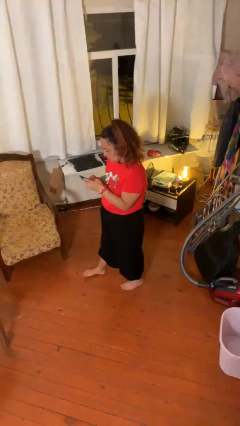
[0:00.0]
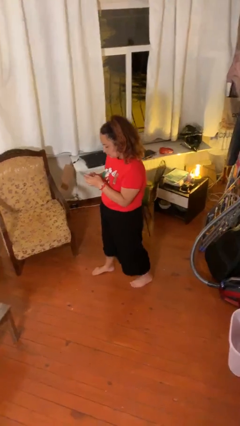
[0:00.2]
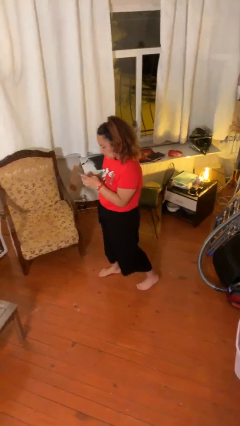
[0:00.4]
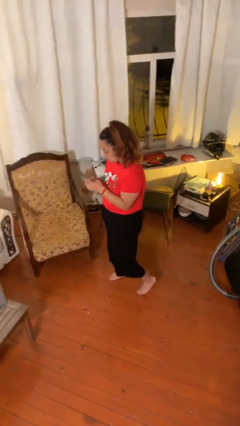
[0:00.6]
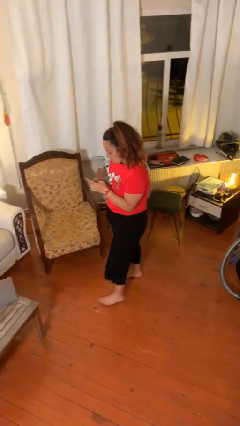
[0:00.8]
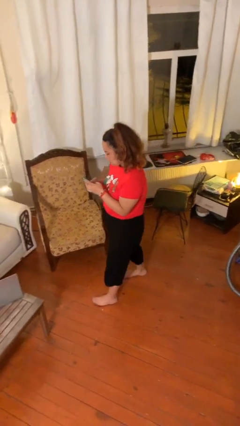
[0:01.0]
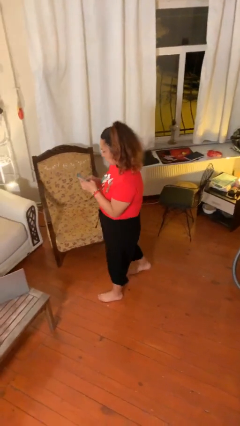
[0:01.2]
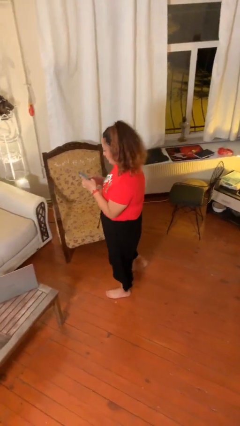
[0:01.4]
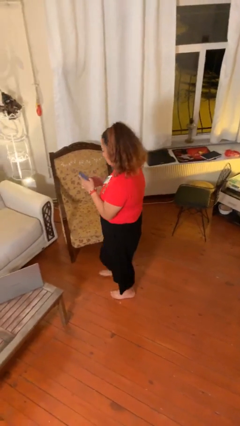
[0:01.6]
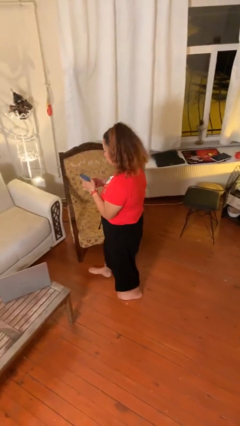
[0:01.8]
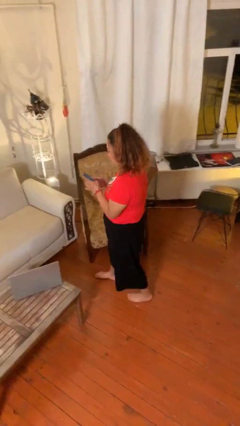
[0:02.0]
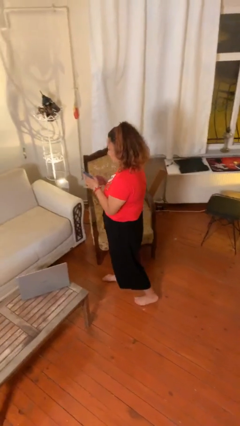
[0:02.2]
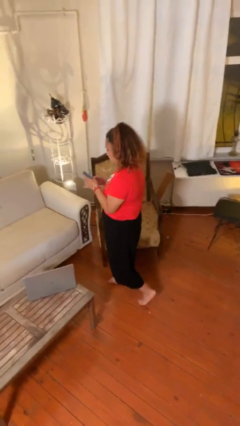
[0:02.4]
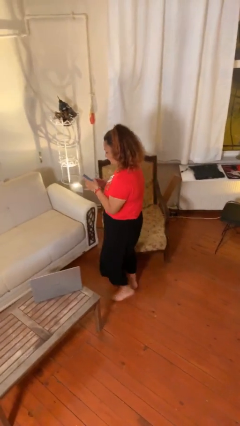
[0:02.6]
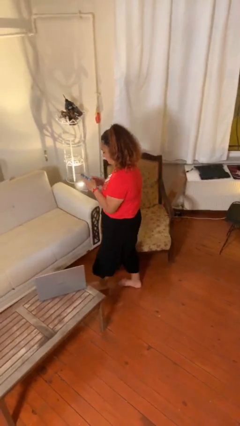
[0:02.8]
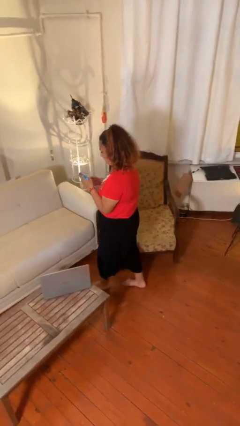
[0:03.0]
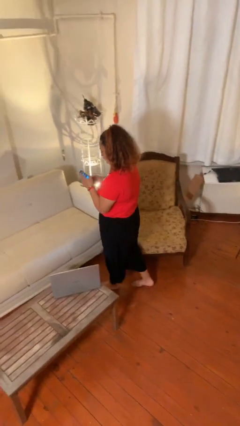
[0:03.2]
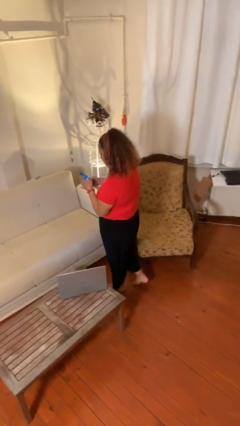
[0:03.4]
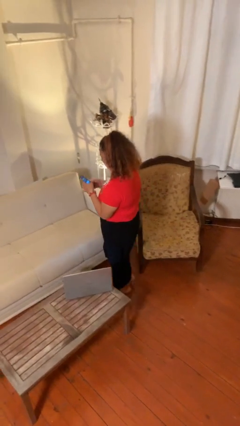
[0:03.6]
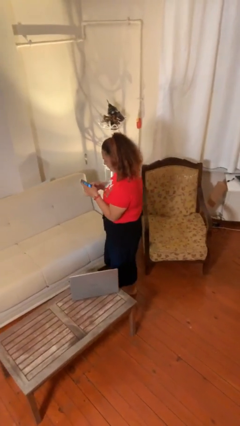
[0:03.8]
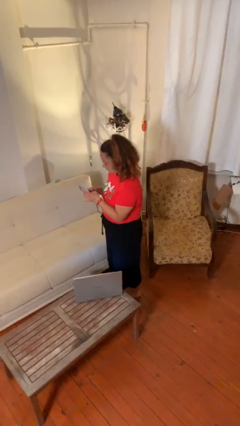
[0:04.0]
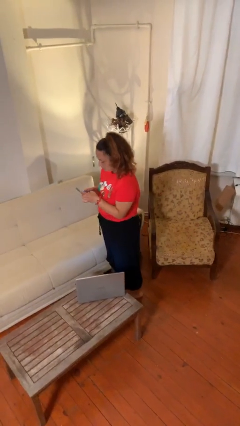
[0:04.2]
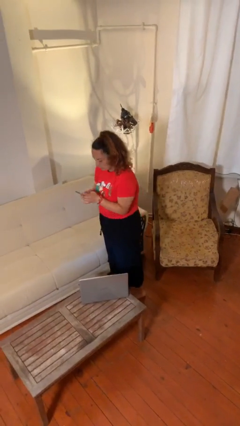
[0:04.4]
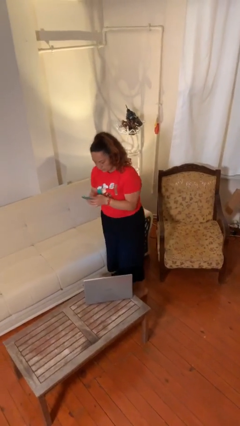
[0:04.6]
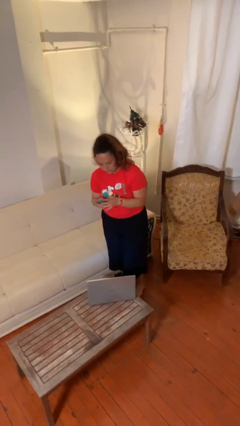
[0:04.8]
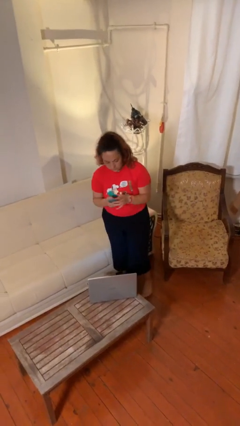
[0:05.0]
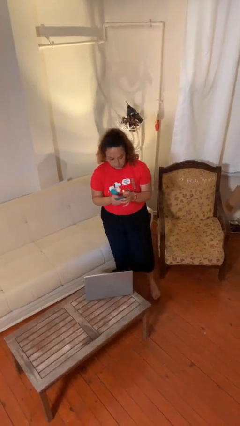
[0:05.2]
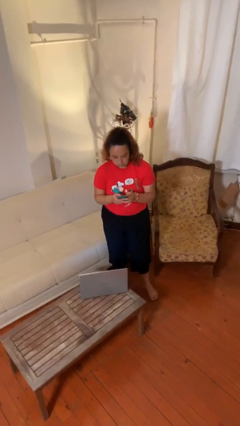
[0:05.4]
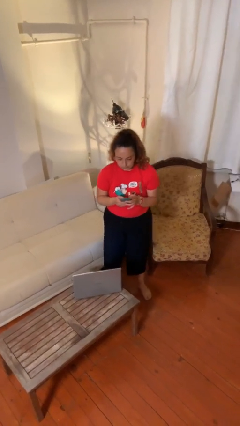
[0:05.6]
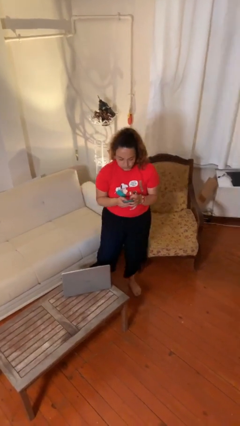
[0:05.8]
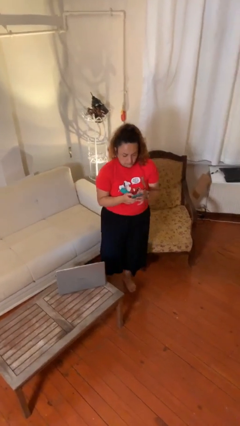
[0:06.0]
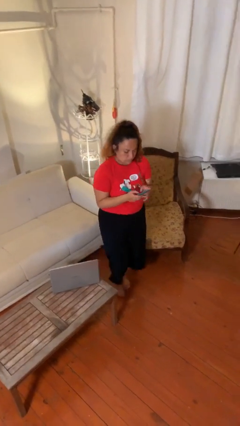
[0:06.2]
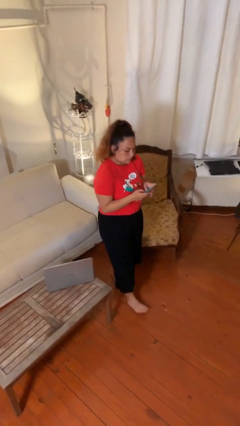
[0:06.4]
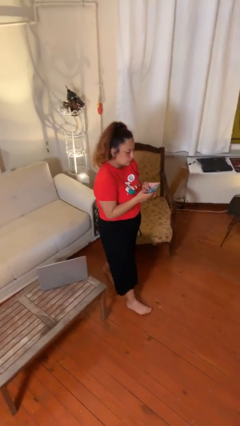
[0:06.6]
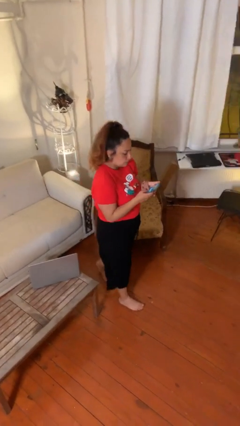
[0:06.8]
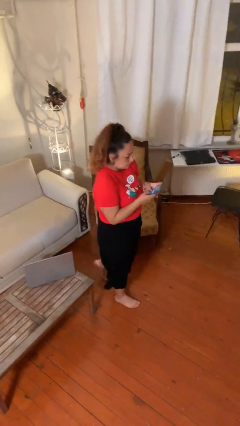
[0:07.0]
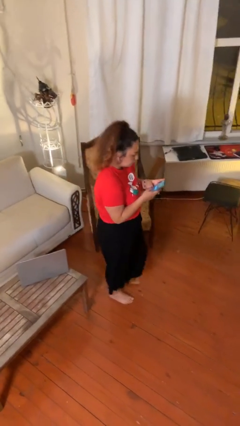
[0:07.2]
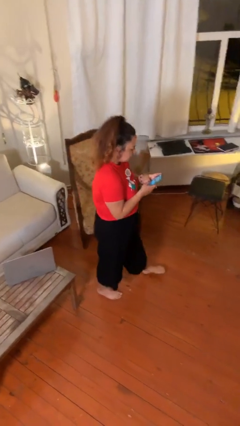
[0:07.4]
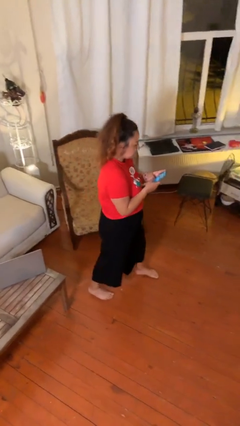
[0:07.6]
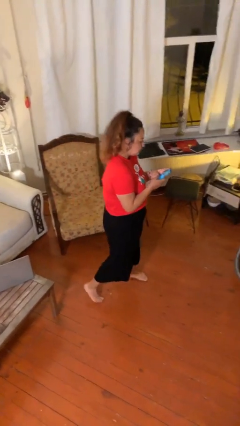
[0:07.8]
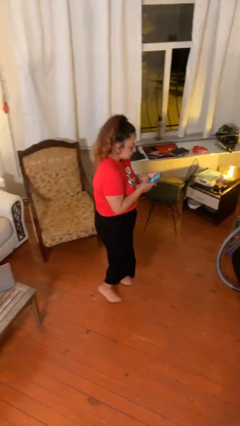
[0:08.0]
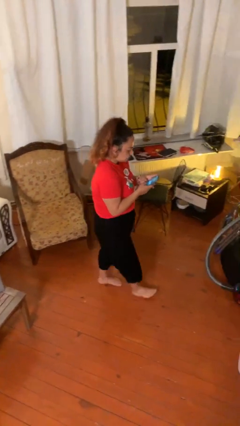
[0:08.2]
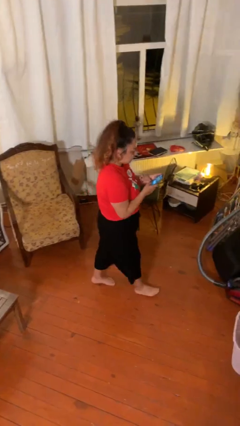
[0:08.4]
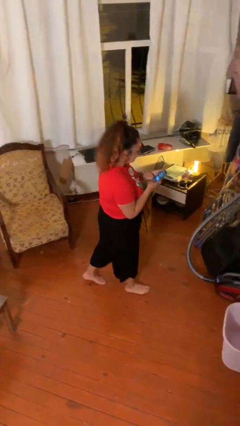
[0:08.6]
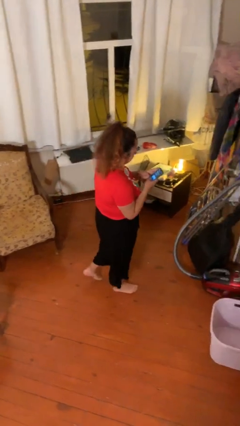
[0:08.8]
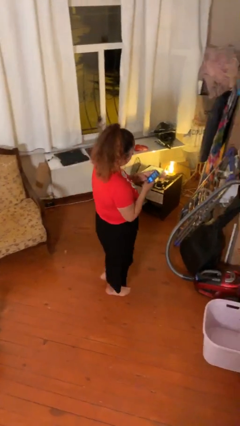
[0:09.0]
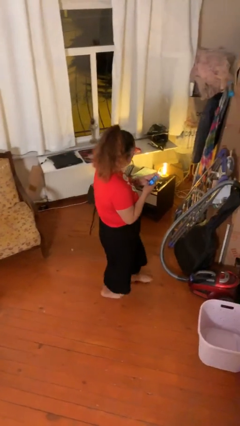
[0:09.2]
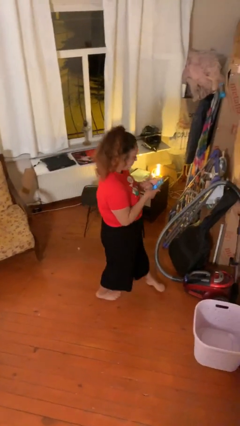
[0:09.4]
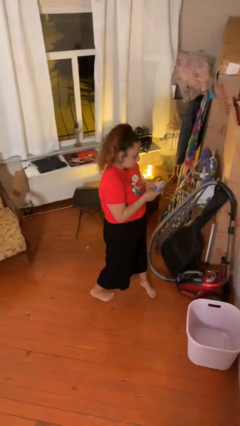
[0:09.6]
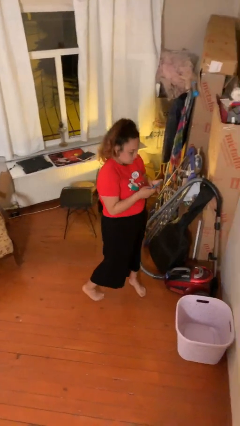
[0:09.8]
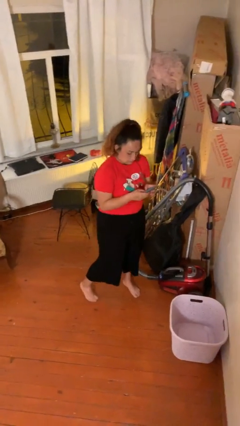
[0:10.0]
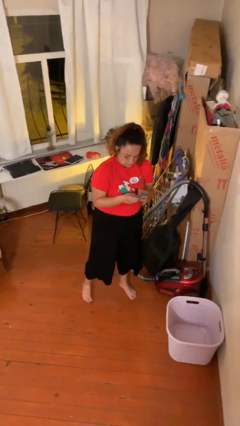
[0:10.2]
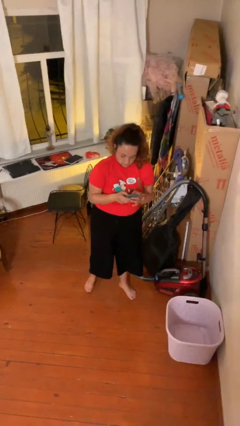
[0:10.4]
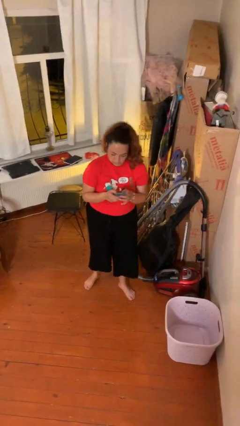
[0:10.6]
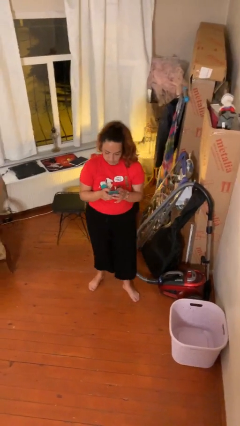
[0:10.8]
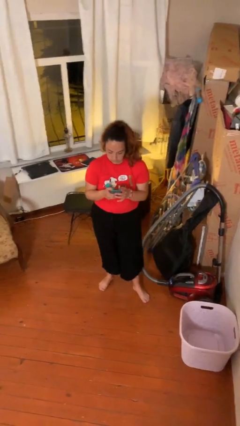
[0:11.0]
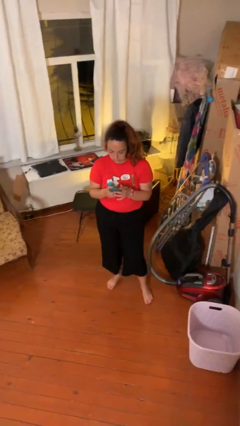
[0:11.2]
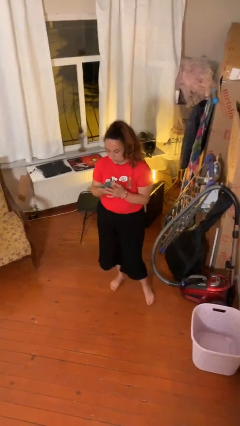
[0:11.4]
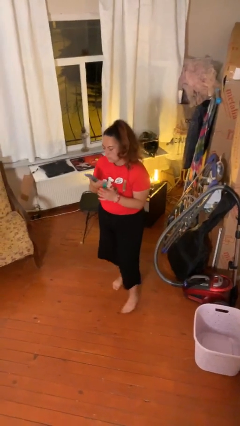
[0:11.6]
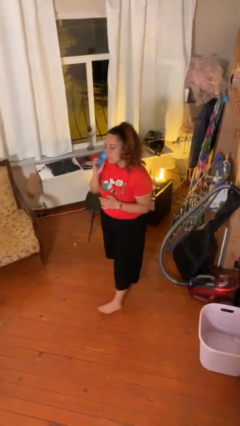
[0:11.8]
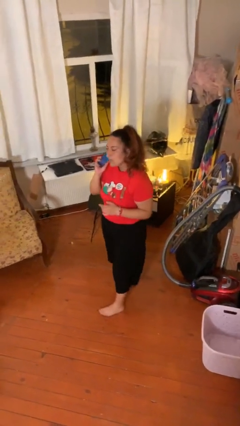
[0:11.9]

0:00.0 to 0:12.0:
person texts on phone

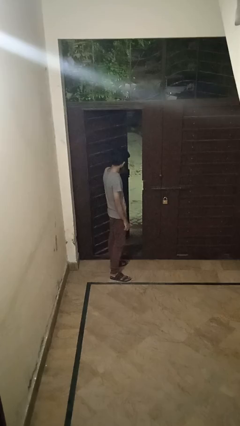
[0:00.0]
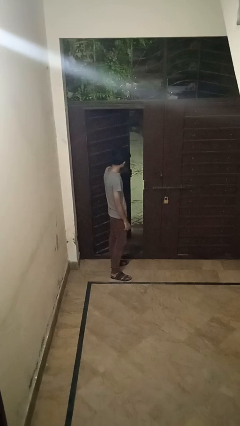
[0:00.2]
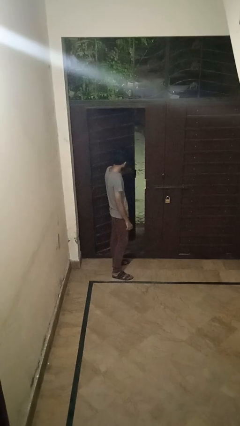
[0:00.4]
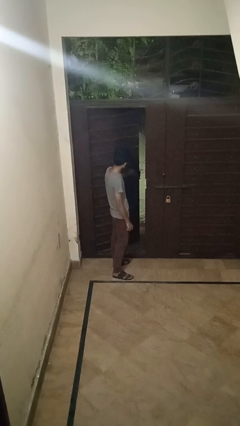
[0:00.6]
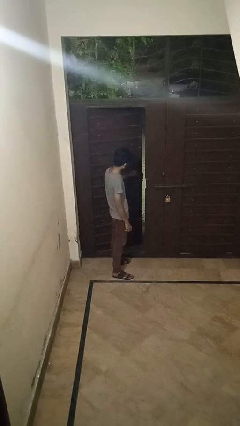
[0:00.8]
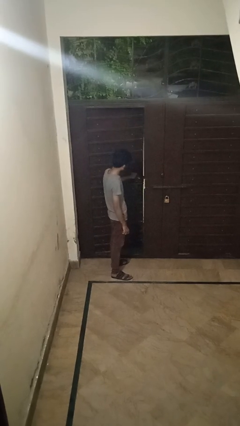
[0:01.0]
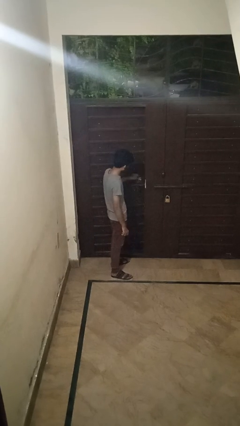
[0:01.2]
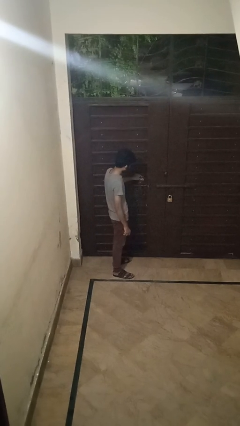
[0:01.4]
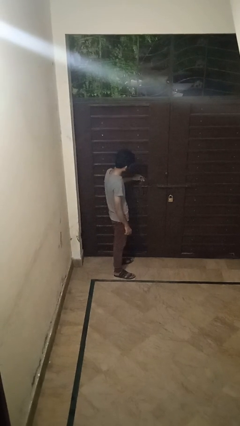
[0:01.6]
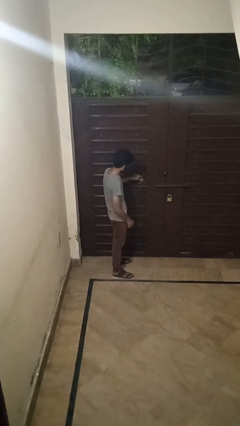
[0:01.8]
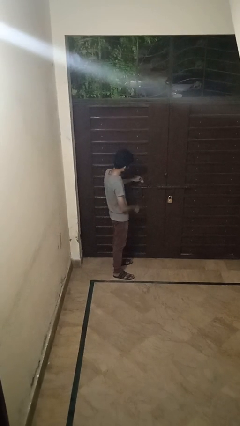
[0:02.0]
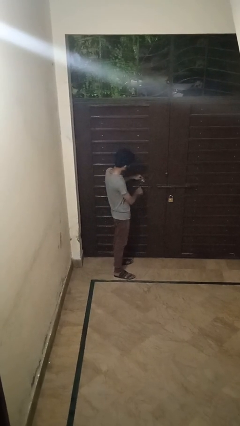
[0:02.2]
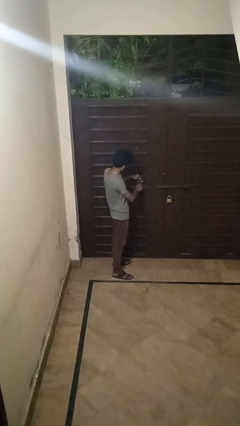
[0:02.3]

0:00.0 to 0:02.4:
person closes facility door

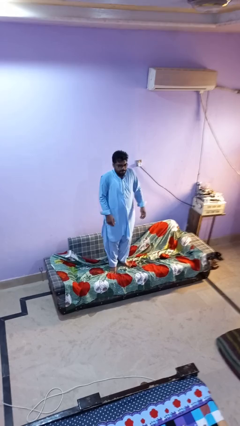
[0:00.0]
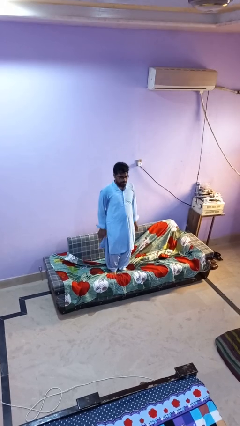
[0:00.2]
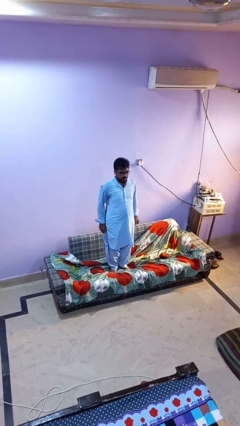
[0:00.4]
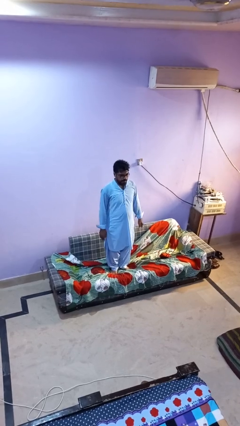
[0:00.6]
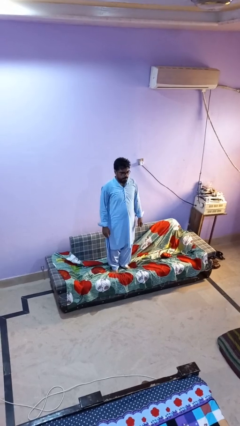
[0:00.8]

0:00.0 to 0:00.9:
person jumps on couch

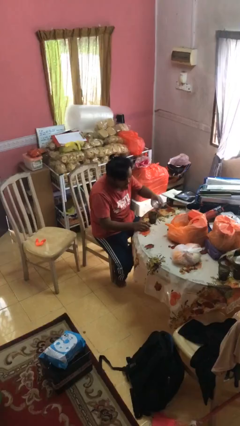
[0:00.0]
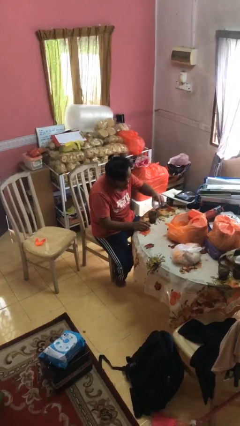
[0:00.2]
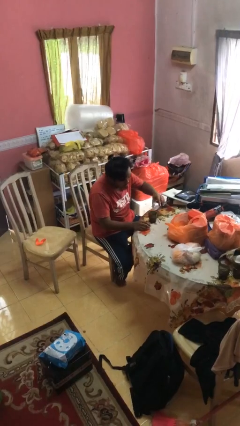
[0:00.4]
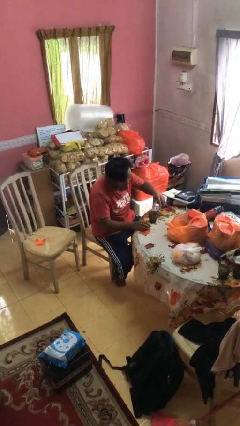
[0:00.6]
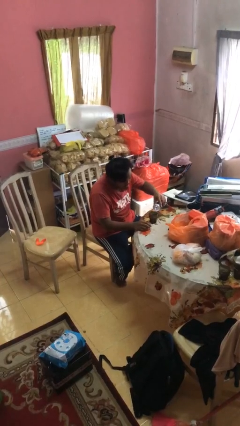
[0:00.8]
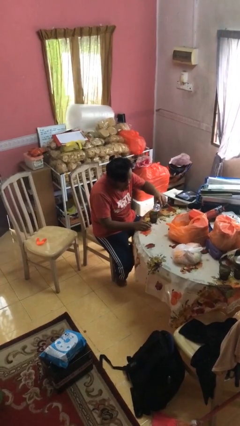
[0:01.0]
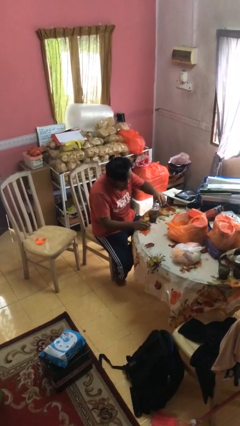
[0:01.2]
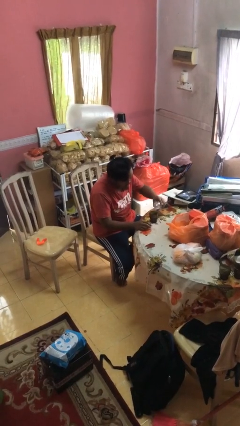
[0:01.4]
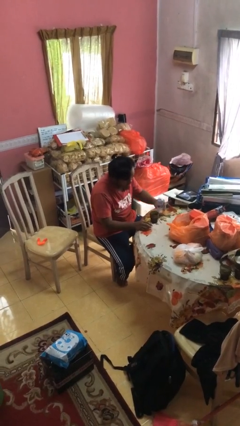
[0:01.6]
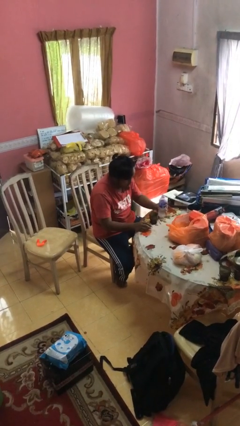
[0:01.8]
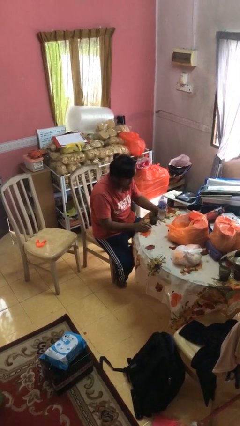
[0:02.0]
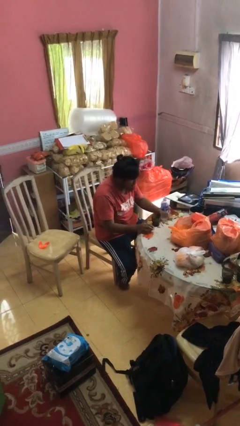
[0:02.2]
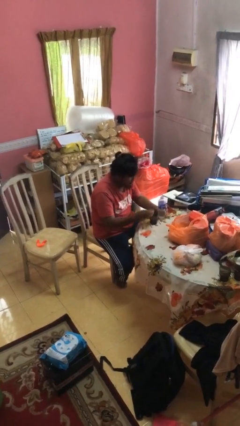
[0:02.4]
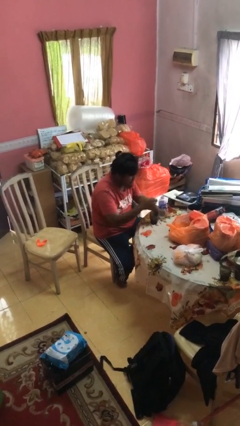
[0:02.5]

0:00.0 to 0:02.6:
person pours liquid into cup

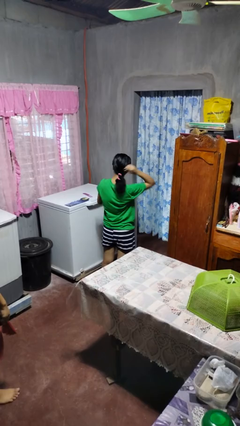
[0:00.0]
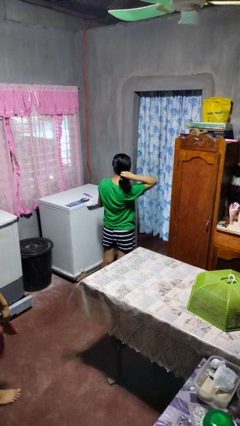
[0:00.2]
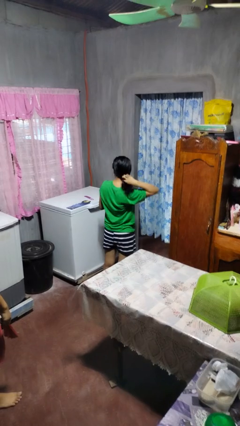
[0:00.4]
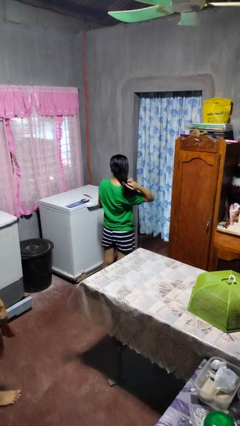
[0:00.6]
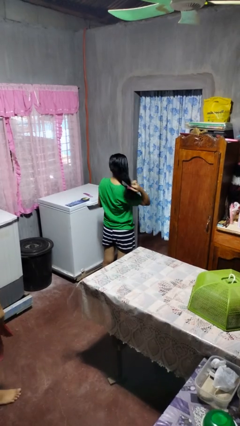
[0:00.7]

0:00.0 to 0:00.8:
person takes off hairtie
